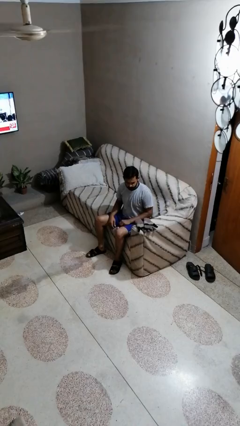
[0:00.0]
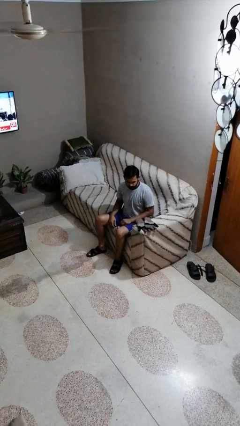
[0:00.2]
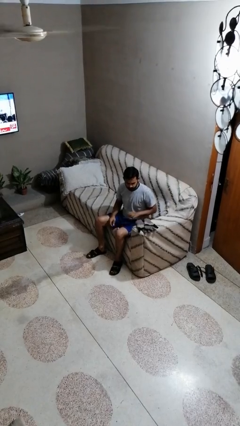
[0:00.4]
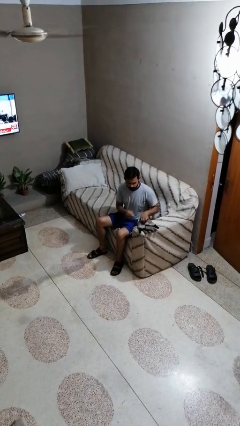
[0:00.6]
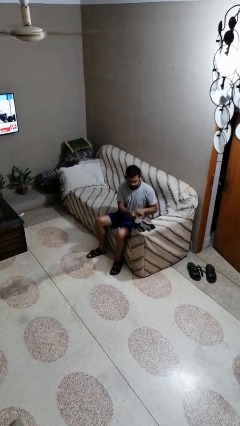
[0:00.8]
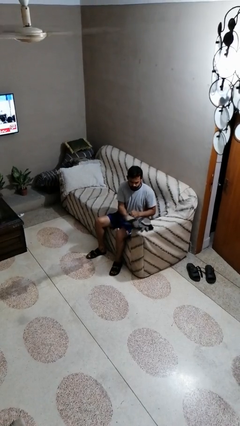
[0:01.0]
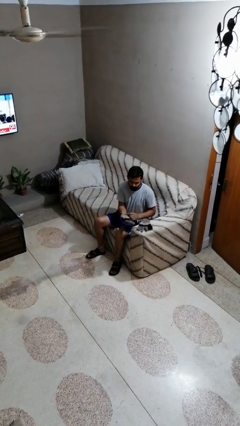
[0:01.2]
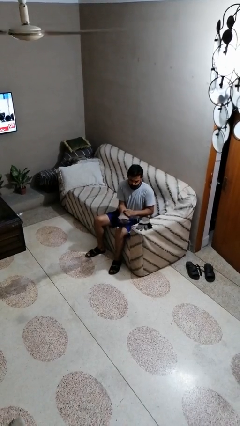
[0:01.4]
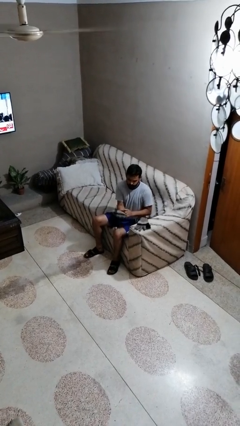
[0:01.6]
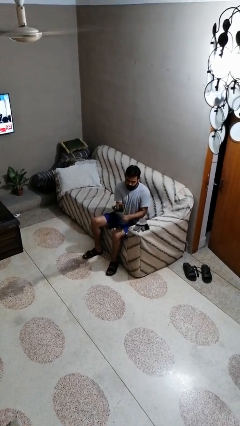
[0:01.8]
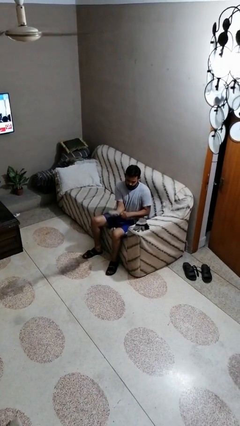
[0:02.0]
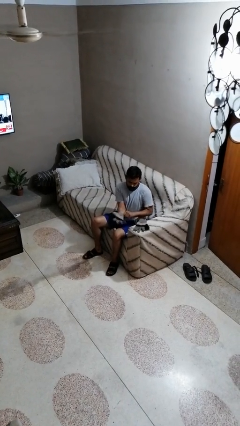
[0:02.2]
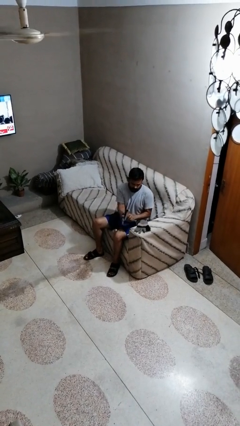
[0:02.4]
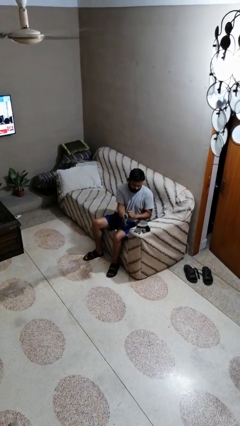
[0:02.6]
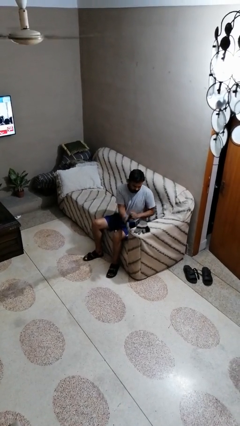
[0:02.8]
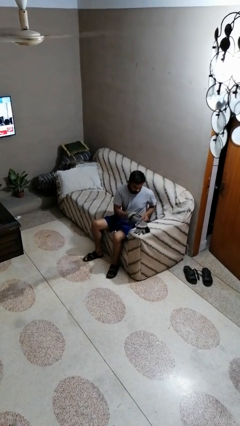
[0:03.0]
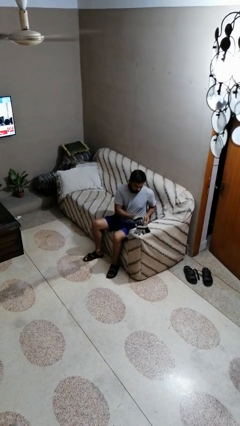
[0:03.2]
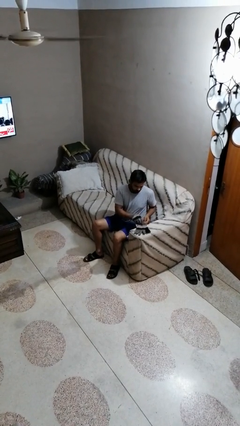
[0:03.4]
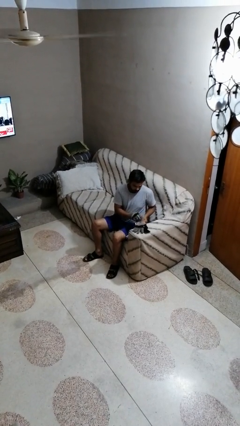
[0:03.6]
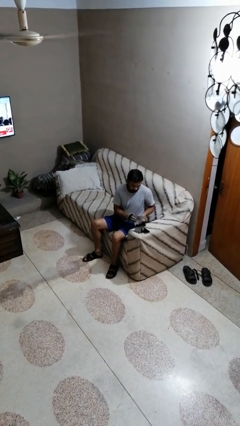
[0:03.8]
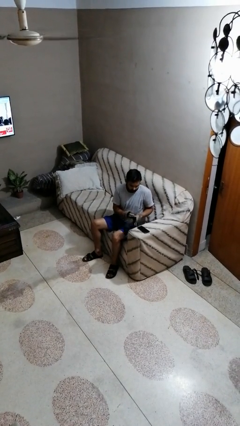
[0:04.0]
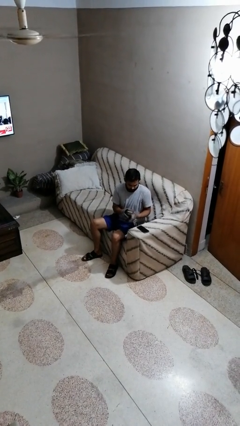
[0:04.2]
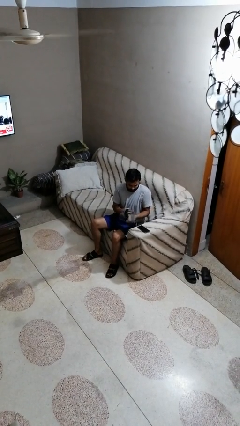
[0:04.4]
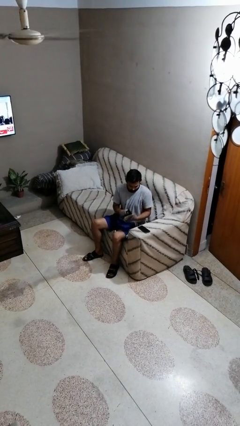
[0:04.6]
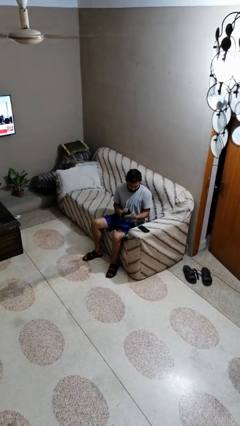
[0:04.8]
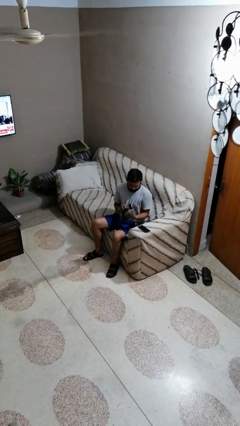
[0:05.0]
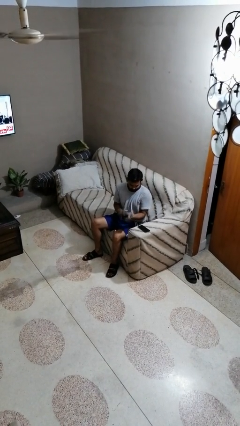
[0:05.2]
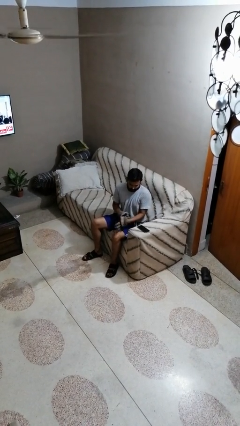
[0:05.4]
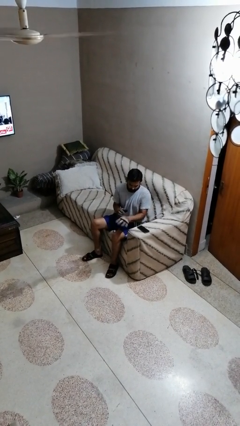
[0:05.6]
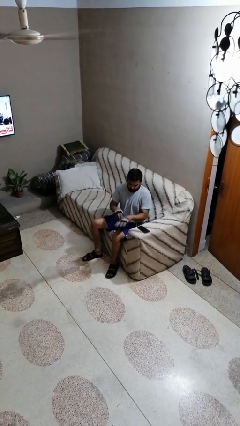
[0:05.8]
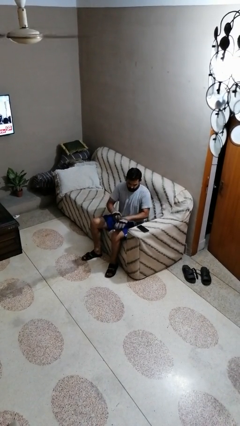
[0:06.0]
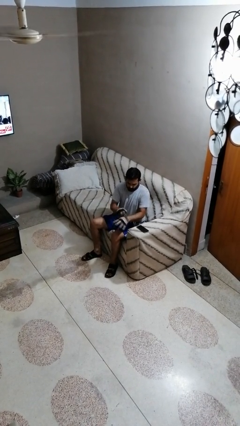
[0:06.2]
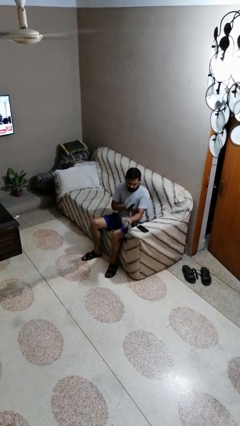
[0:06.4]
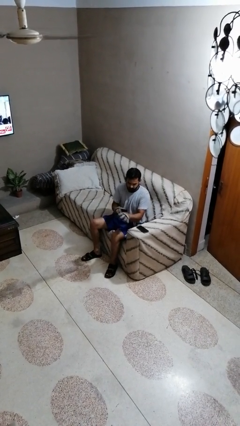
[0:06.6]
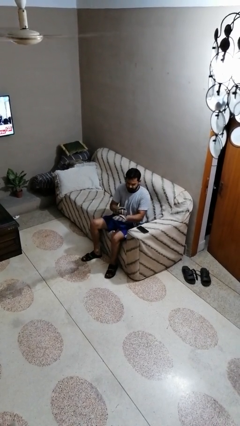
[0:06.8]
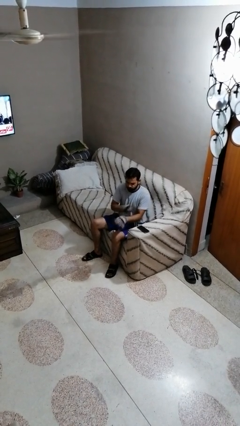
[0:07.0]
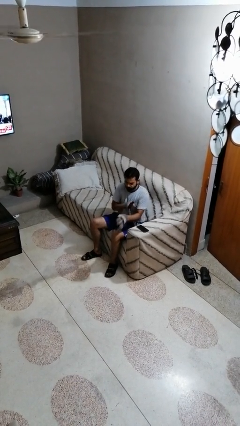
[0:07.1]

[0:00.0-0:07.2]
person puts on gloves

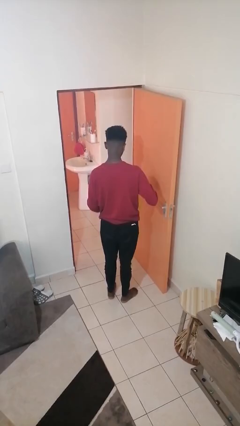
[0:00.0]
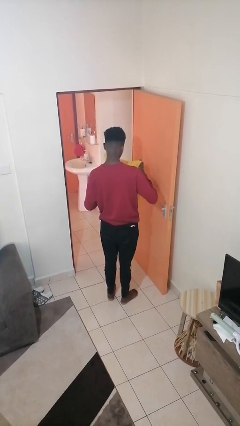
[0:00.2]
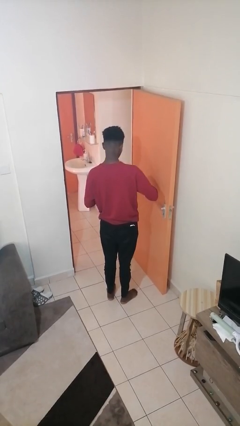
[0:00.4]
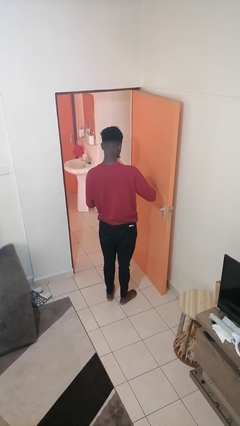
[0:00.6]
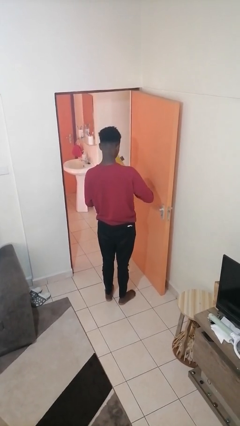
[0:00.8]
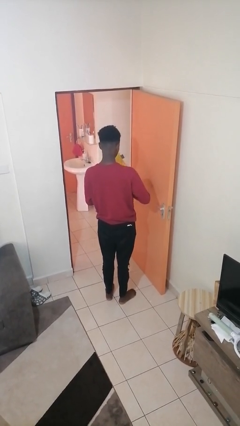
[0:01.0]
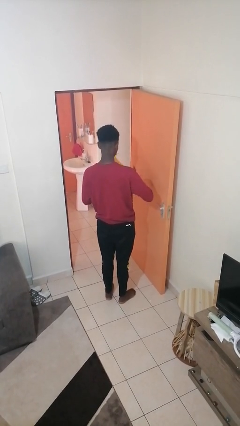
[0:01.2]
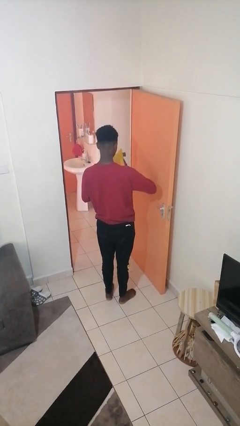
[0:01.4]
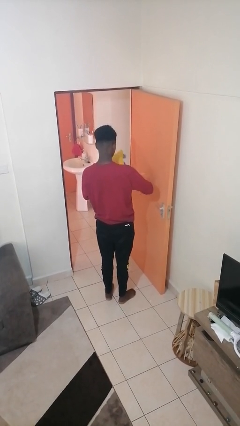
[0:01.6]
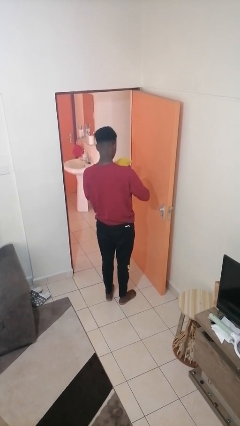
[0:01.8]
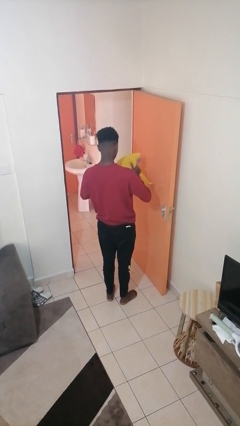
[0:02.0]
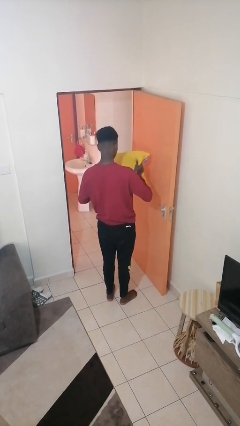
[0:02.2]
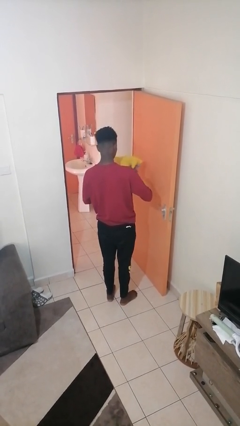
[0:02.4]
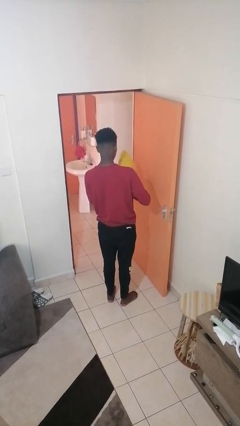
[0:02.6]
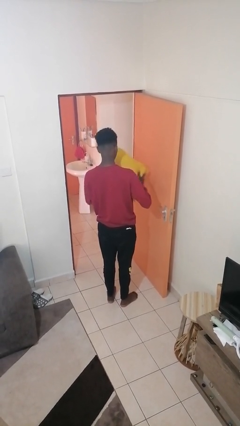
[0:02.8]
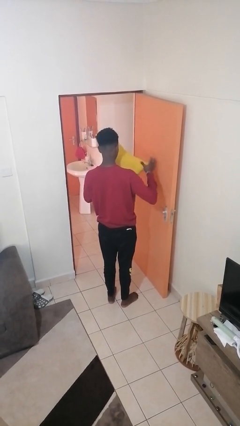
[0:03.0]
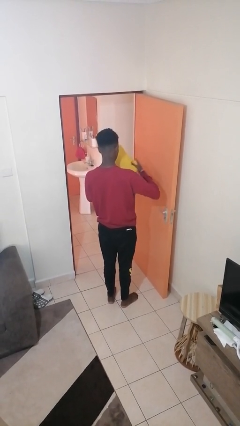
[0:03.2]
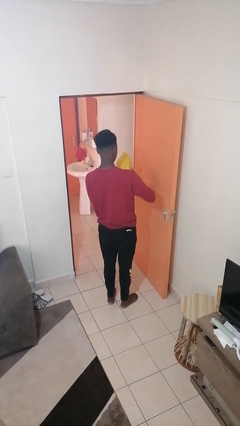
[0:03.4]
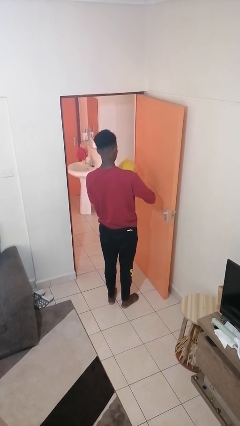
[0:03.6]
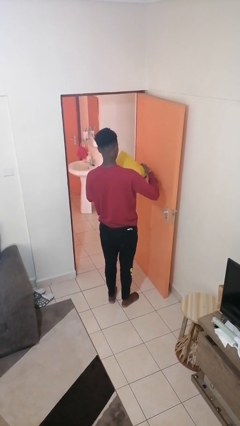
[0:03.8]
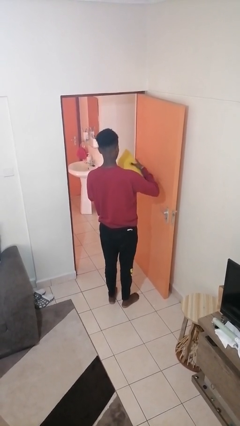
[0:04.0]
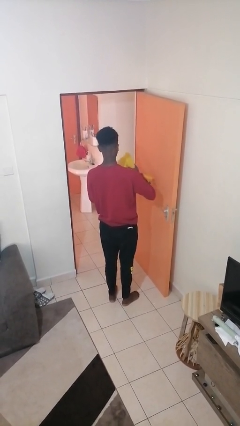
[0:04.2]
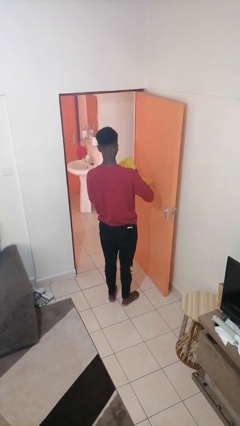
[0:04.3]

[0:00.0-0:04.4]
person squeezes object

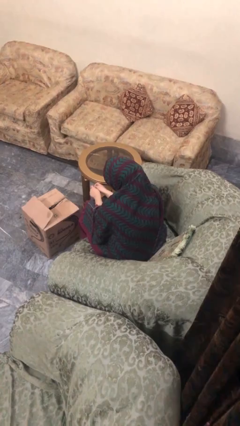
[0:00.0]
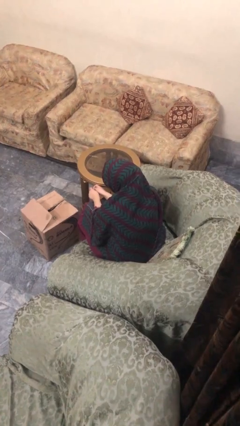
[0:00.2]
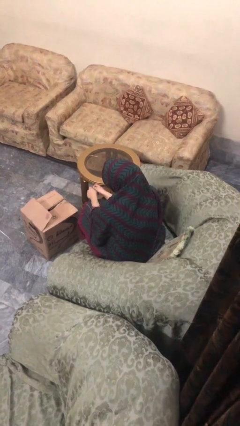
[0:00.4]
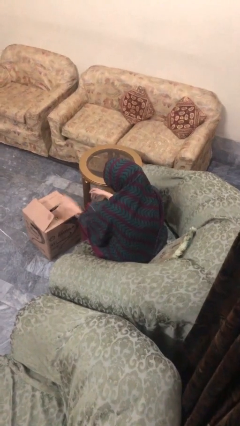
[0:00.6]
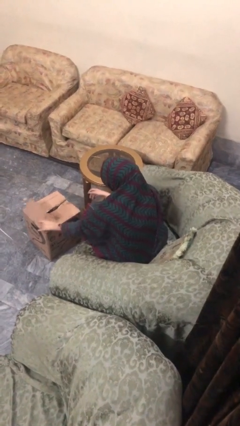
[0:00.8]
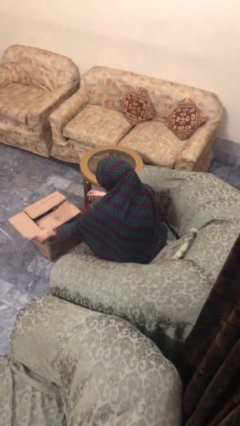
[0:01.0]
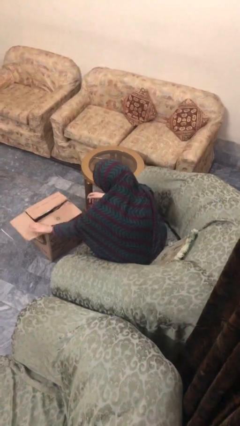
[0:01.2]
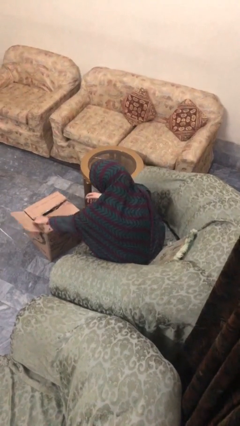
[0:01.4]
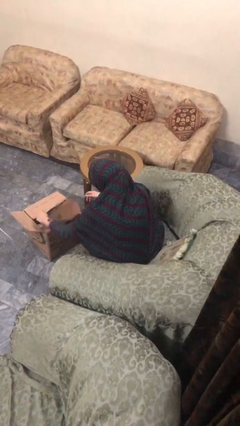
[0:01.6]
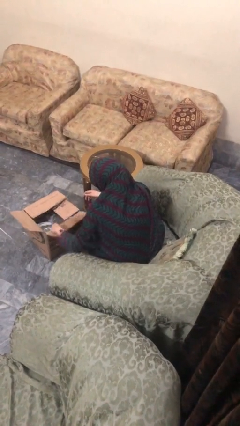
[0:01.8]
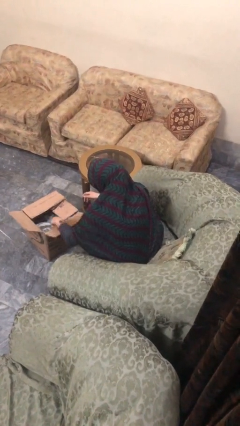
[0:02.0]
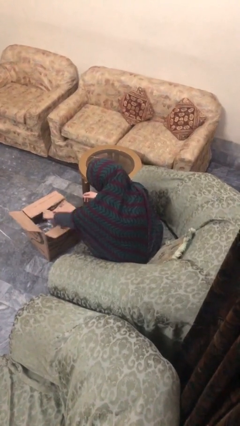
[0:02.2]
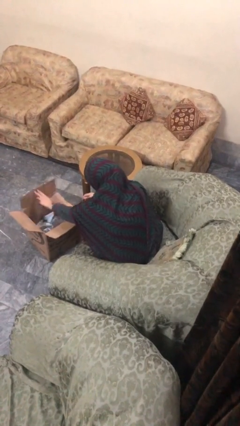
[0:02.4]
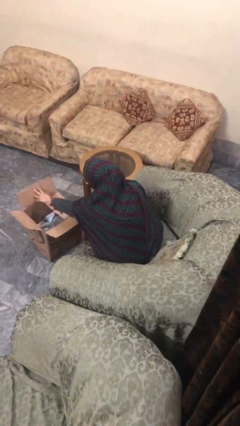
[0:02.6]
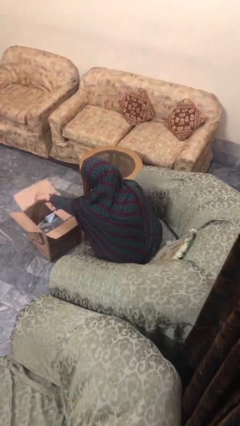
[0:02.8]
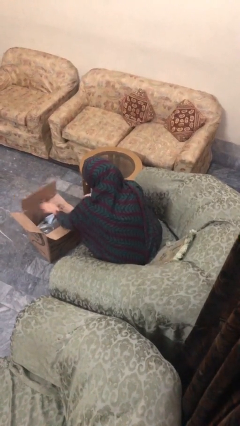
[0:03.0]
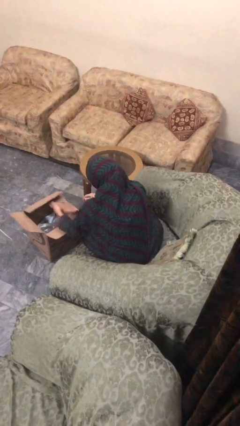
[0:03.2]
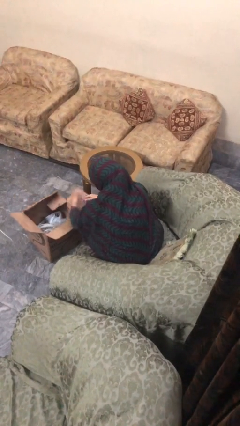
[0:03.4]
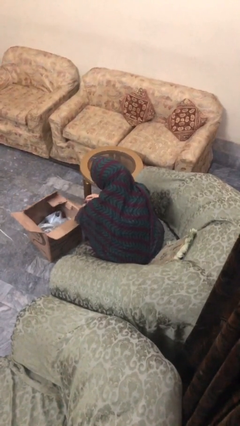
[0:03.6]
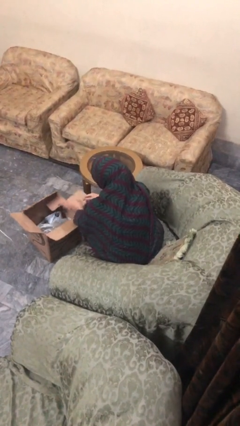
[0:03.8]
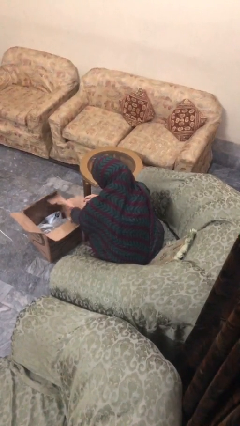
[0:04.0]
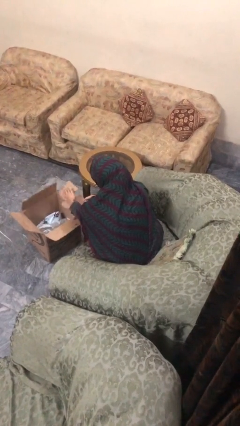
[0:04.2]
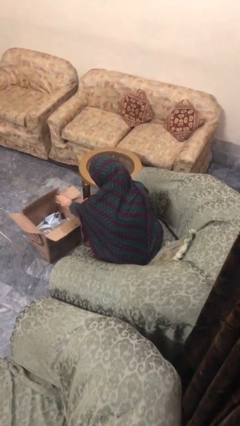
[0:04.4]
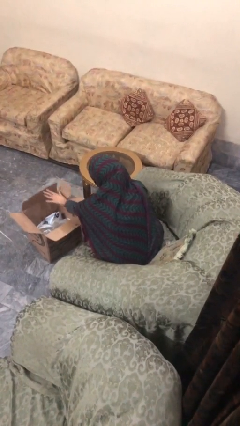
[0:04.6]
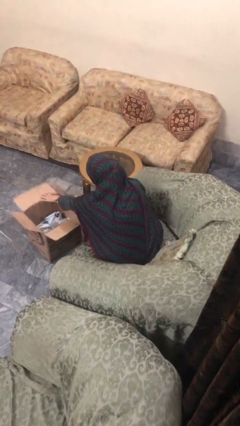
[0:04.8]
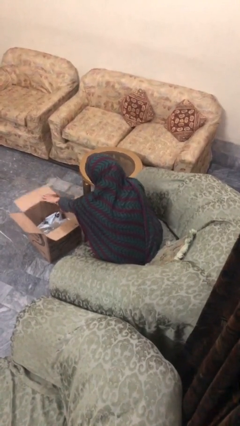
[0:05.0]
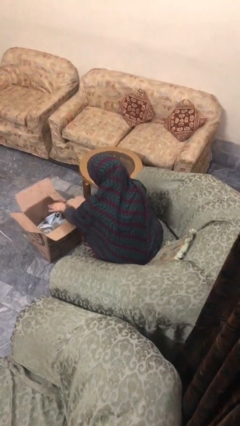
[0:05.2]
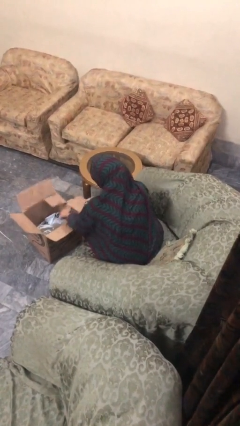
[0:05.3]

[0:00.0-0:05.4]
person opens box

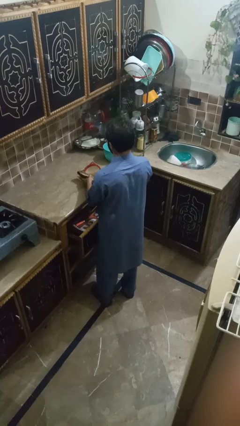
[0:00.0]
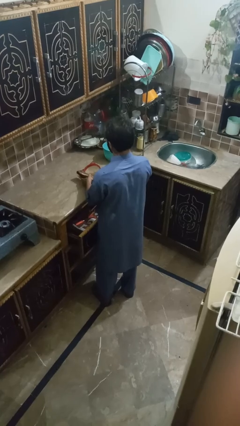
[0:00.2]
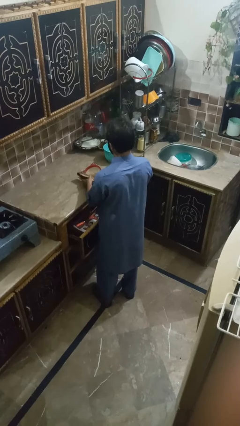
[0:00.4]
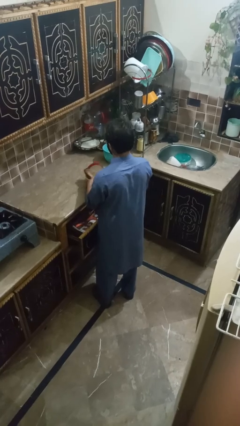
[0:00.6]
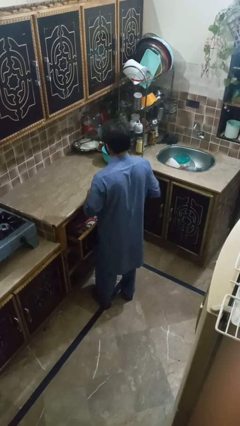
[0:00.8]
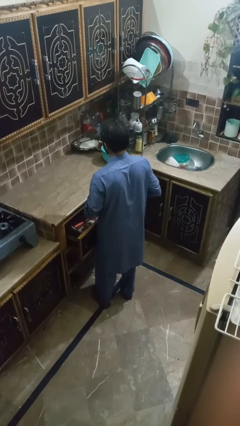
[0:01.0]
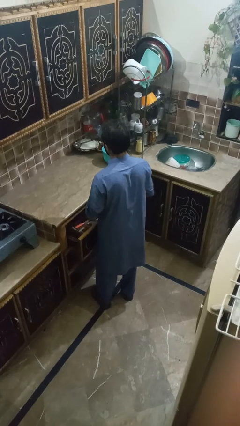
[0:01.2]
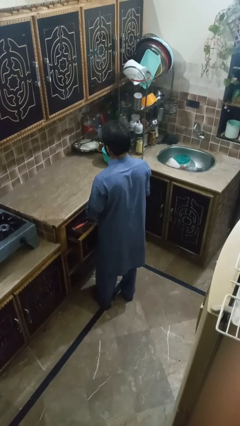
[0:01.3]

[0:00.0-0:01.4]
person puts object into kitchen drawer
